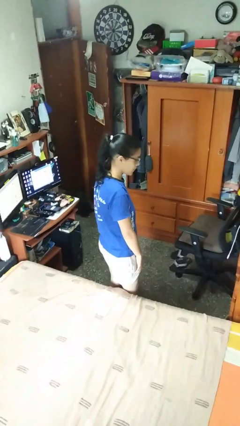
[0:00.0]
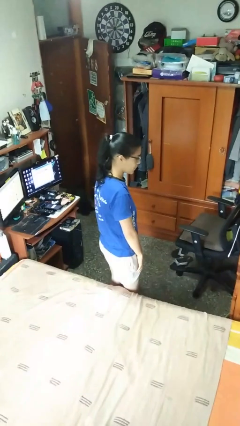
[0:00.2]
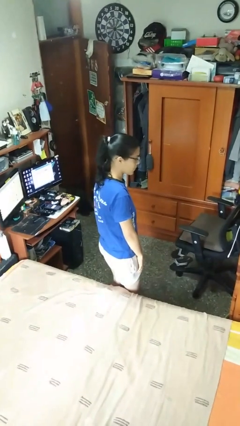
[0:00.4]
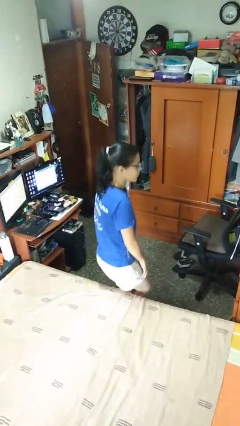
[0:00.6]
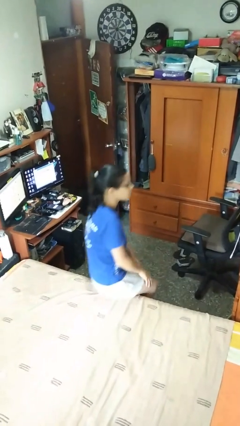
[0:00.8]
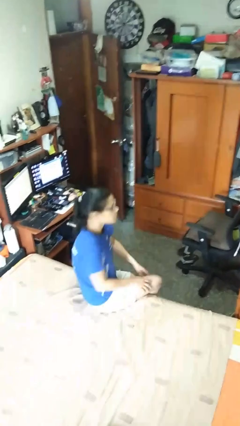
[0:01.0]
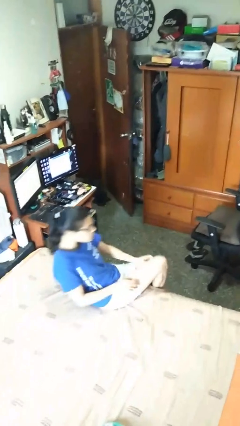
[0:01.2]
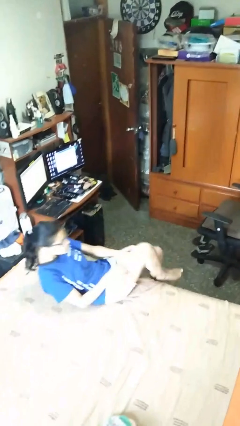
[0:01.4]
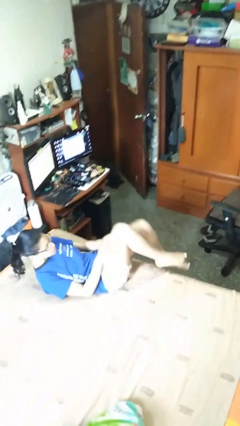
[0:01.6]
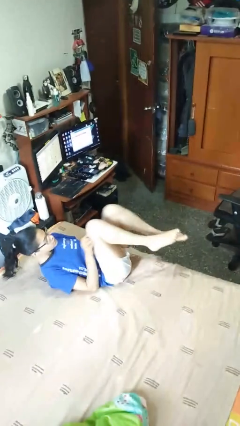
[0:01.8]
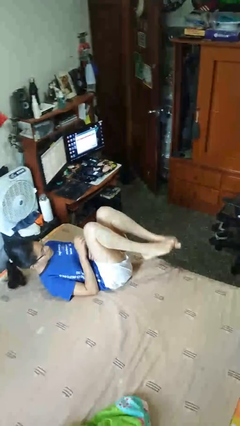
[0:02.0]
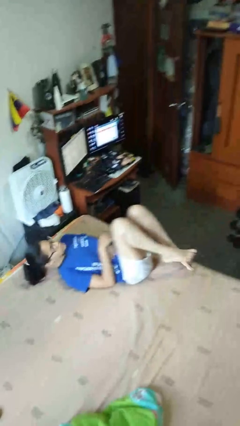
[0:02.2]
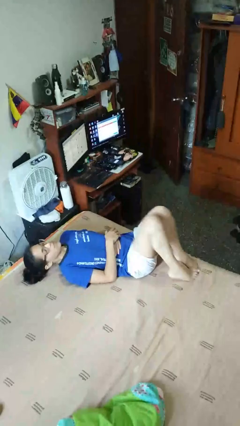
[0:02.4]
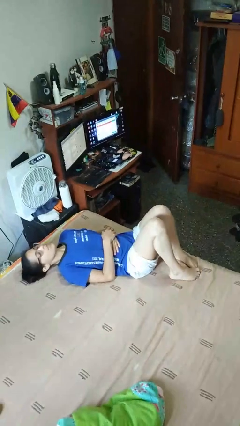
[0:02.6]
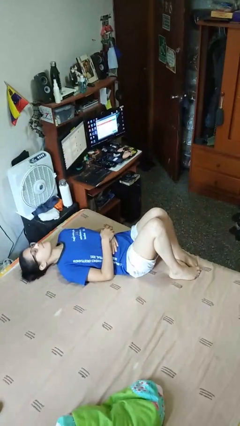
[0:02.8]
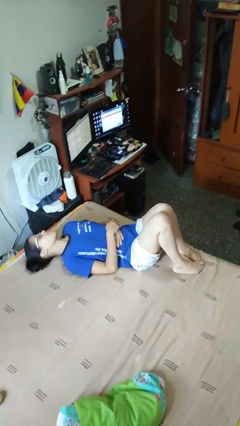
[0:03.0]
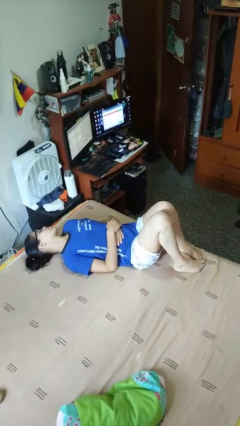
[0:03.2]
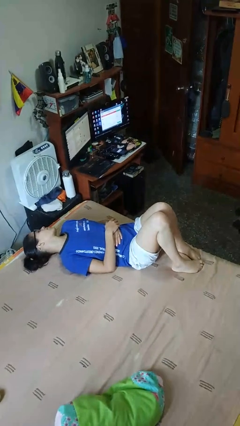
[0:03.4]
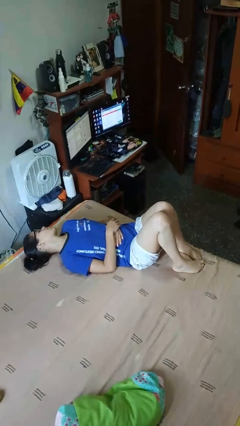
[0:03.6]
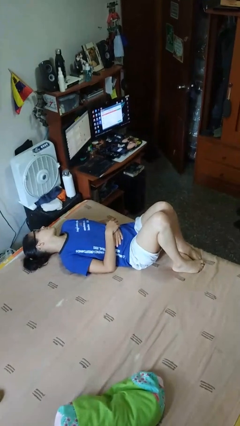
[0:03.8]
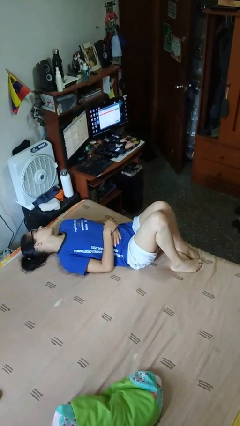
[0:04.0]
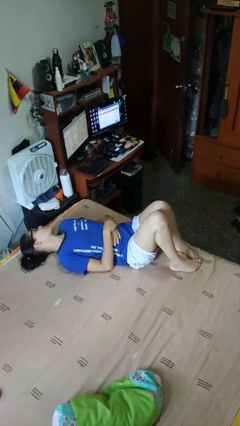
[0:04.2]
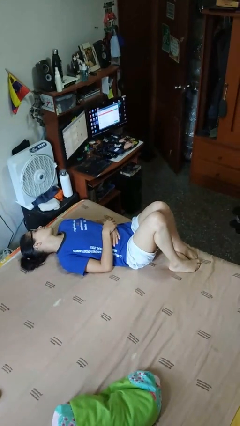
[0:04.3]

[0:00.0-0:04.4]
person lies down on bed

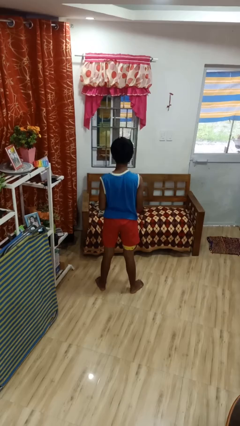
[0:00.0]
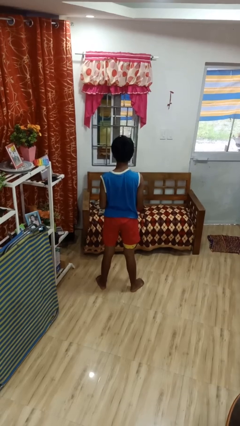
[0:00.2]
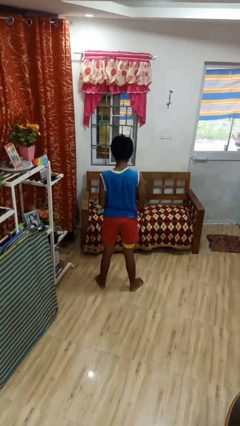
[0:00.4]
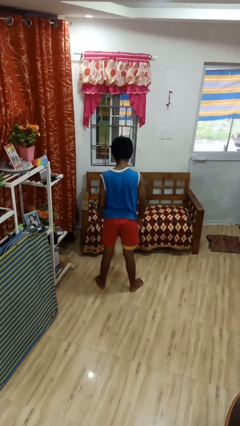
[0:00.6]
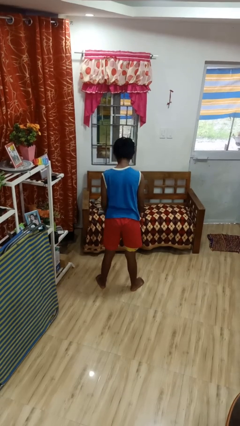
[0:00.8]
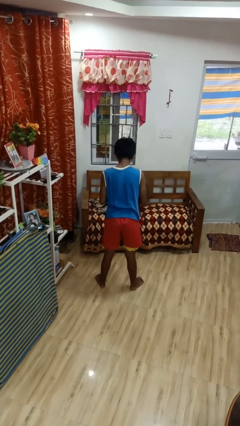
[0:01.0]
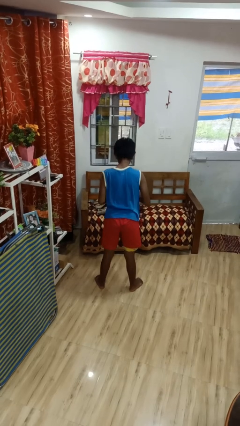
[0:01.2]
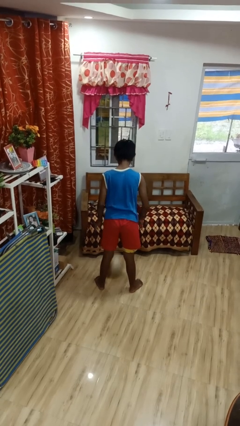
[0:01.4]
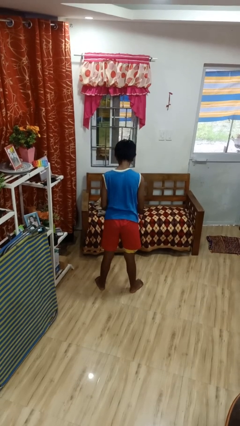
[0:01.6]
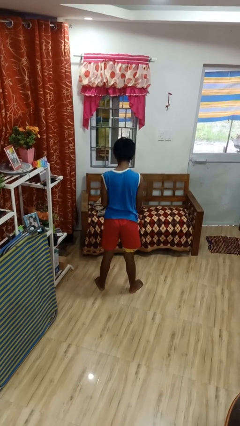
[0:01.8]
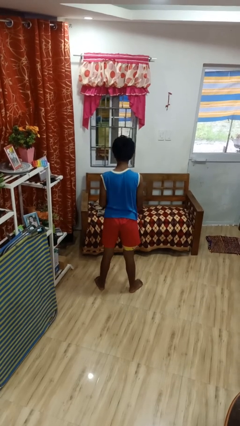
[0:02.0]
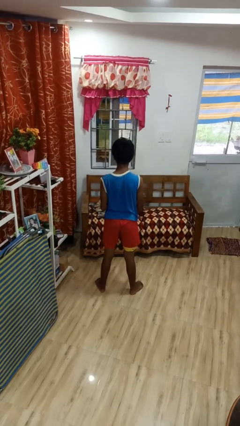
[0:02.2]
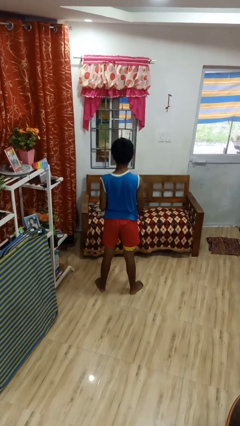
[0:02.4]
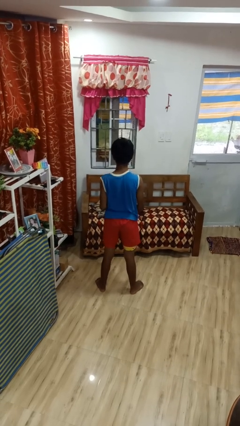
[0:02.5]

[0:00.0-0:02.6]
person bounces ball on floor

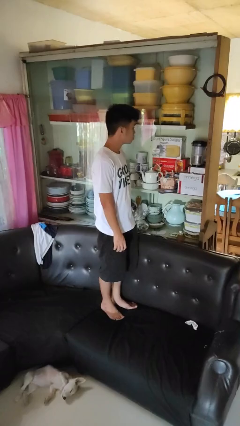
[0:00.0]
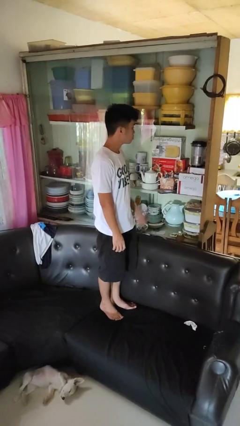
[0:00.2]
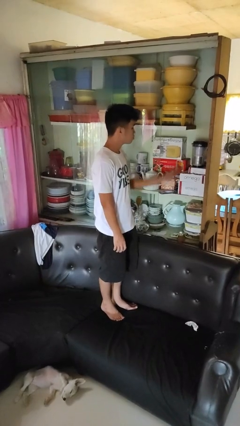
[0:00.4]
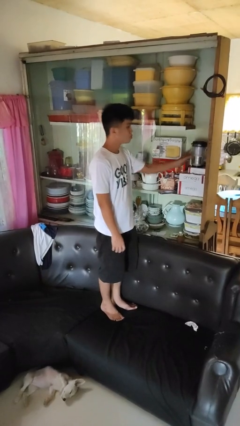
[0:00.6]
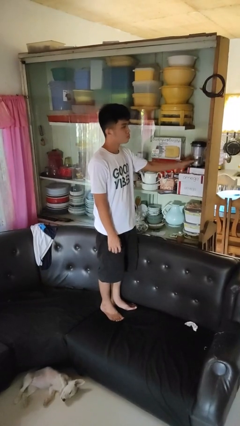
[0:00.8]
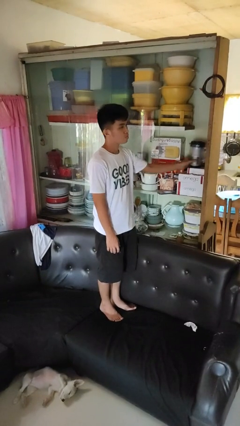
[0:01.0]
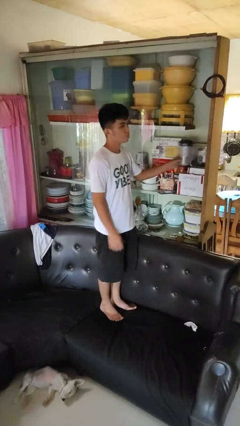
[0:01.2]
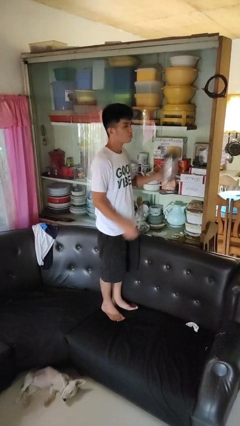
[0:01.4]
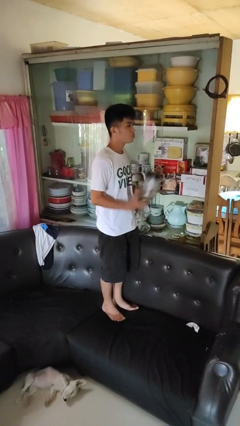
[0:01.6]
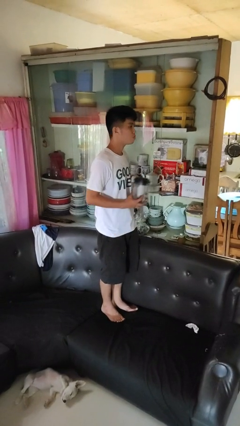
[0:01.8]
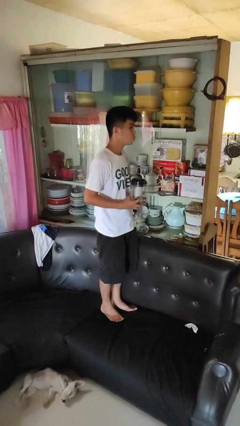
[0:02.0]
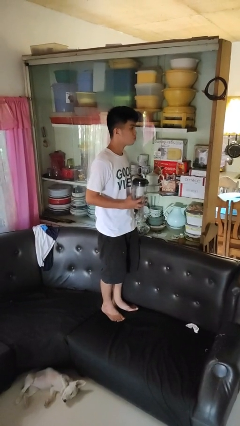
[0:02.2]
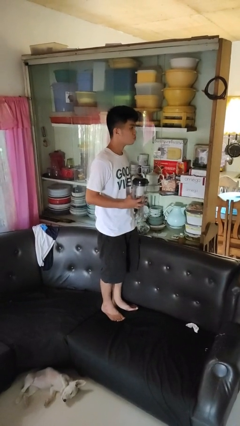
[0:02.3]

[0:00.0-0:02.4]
person picks up object from cabinet

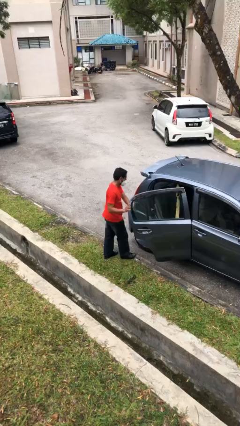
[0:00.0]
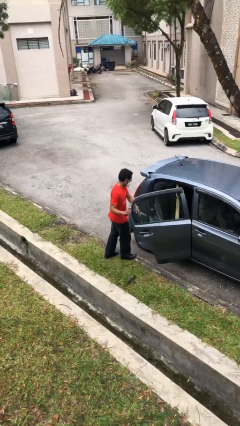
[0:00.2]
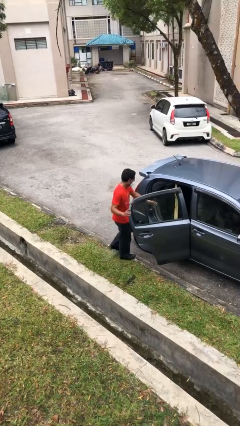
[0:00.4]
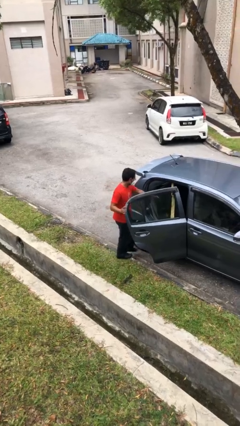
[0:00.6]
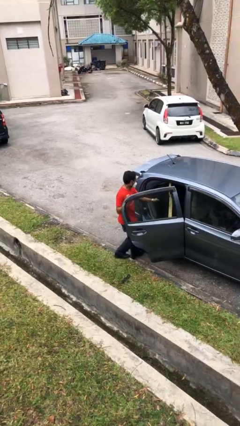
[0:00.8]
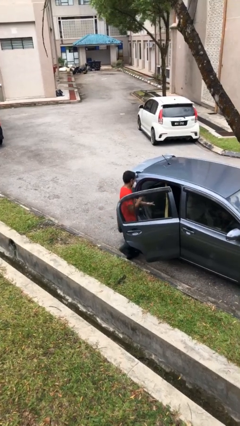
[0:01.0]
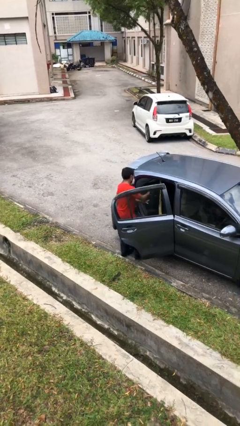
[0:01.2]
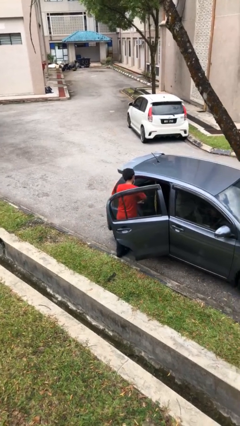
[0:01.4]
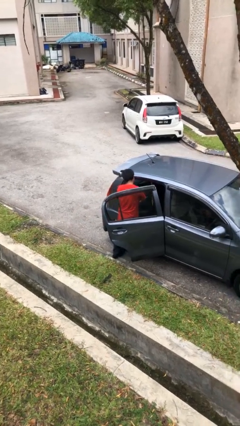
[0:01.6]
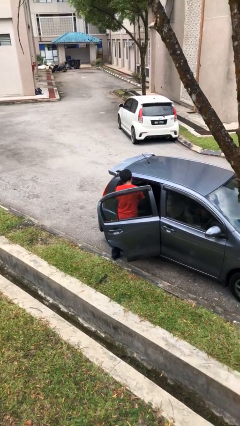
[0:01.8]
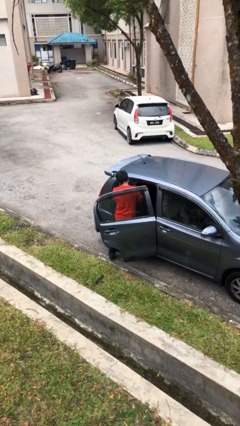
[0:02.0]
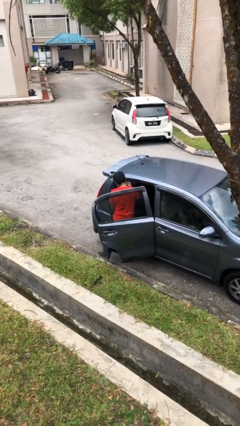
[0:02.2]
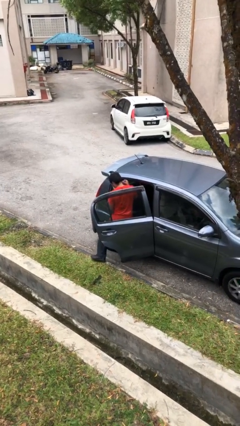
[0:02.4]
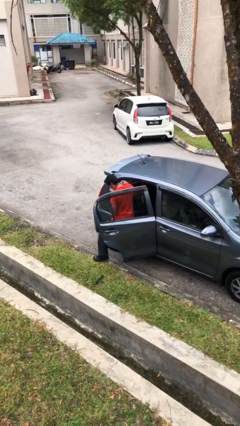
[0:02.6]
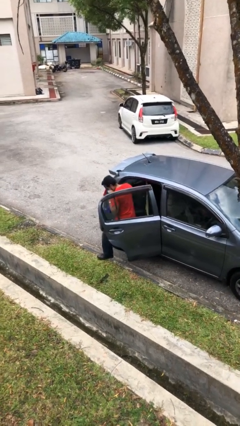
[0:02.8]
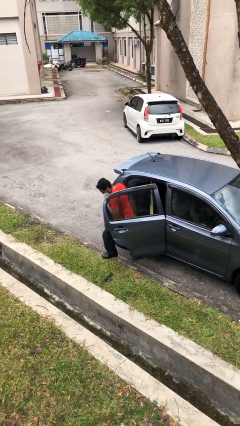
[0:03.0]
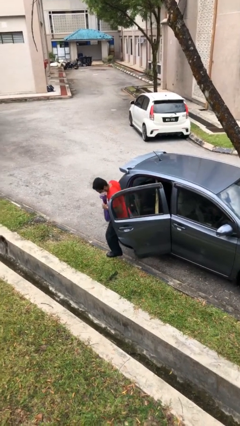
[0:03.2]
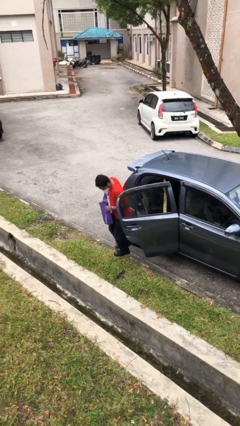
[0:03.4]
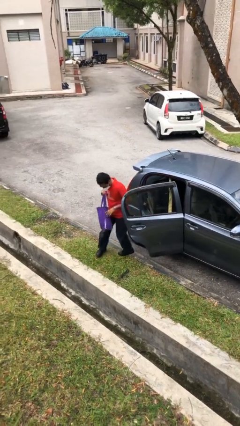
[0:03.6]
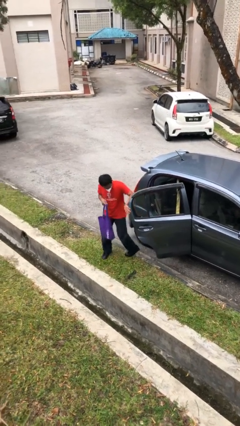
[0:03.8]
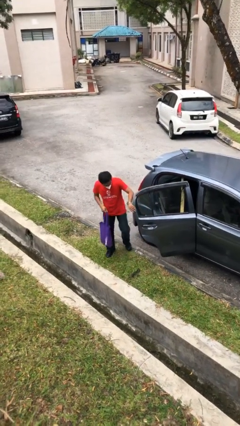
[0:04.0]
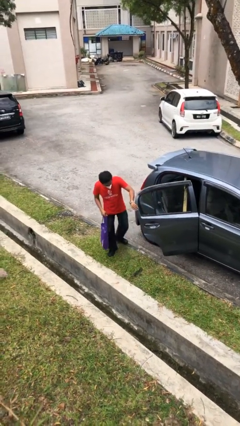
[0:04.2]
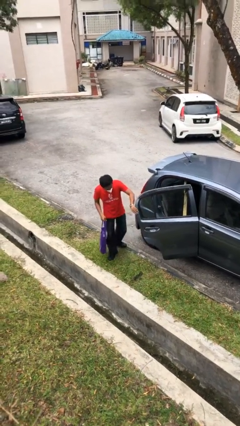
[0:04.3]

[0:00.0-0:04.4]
person unloads car

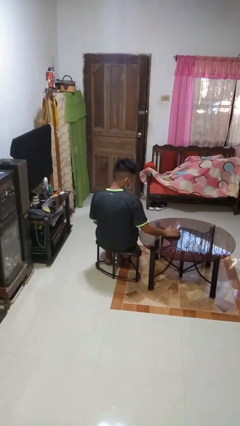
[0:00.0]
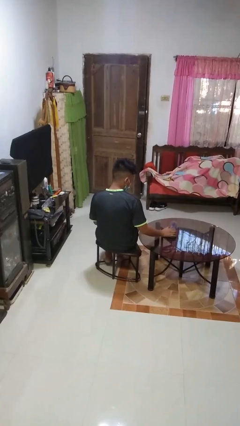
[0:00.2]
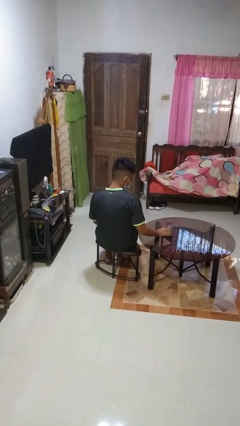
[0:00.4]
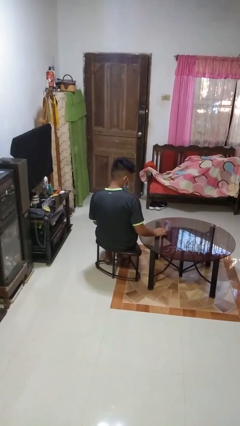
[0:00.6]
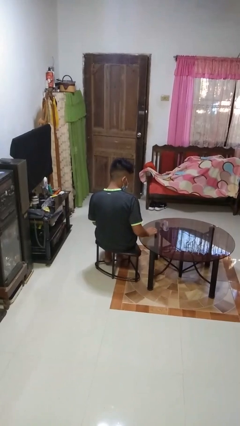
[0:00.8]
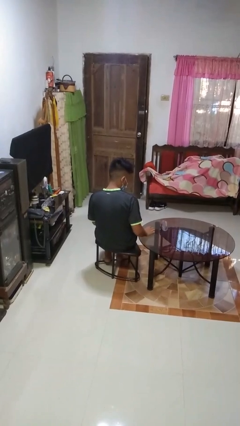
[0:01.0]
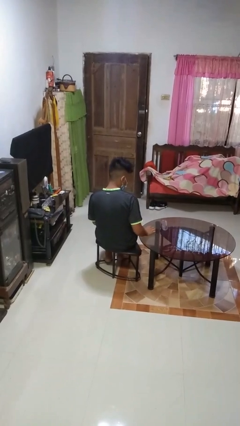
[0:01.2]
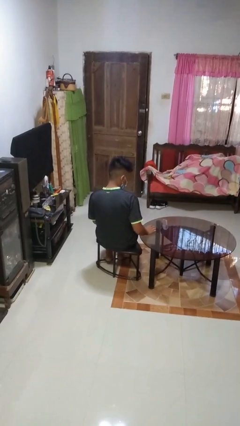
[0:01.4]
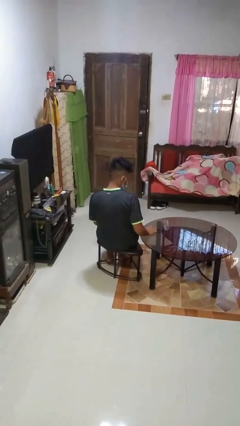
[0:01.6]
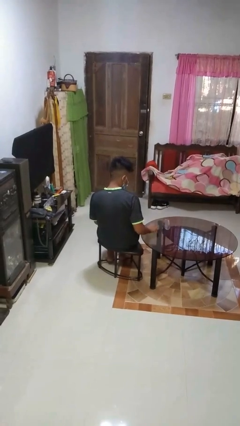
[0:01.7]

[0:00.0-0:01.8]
person drinks from beverage can

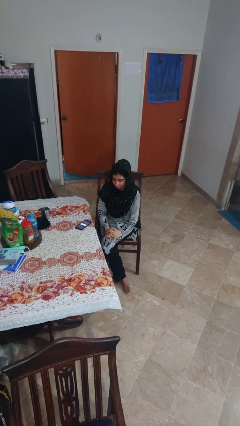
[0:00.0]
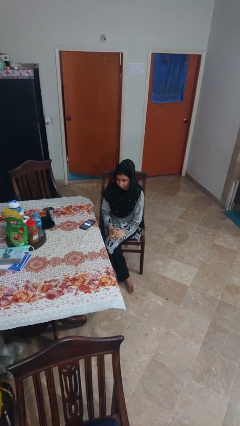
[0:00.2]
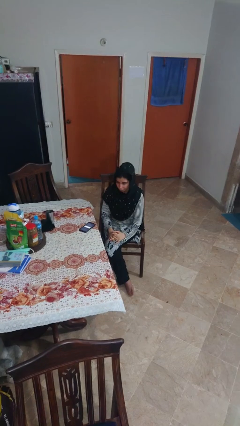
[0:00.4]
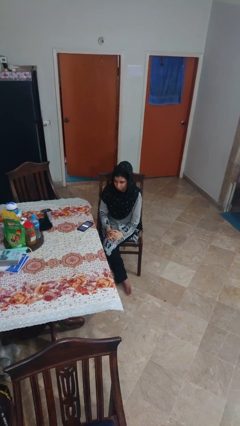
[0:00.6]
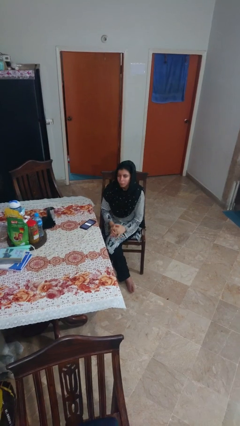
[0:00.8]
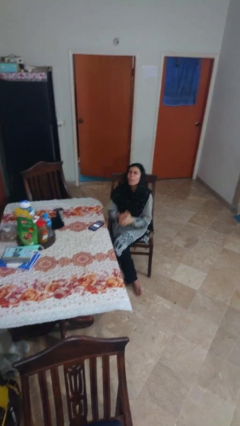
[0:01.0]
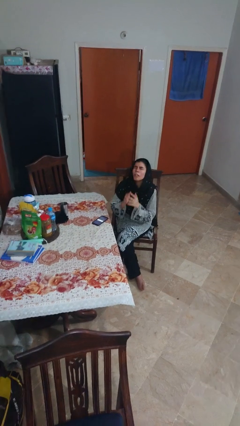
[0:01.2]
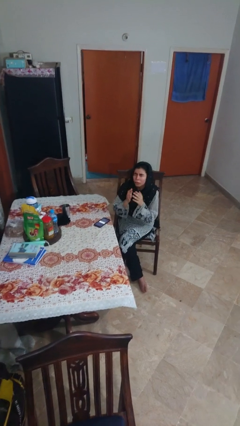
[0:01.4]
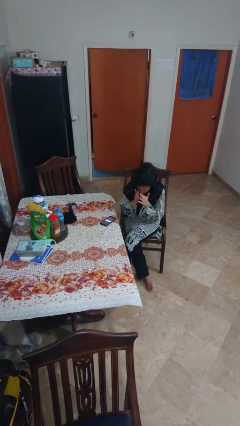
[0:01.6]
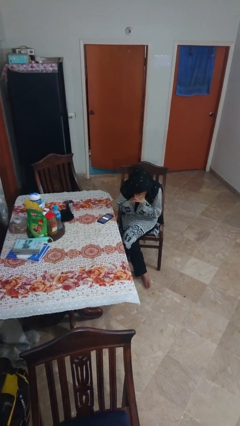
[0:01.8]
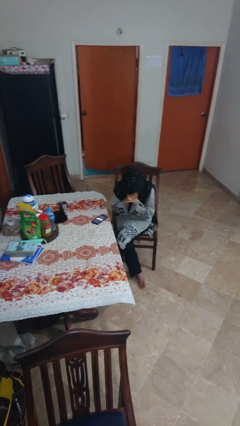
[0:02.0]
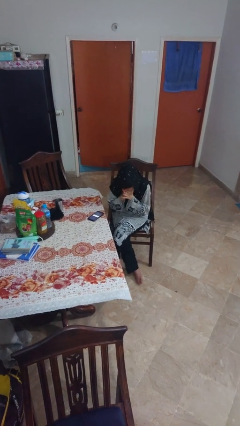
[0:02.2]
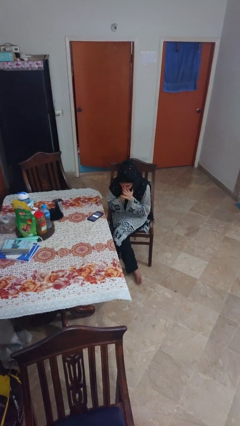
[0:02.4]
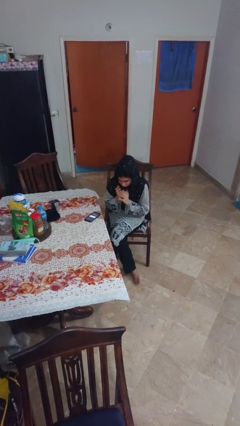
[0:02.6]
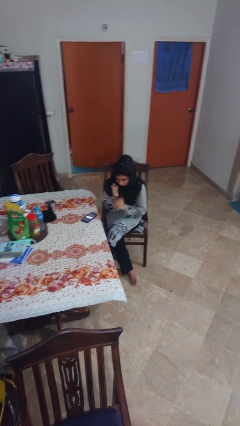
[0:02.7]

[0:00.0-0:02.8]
person sneezes into hand
